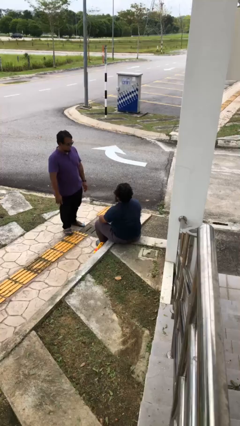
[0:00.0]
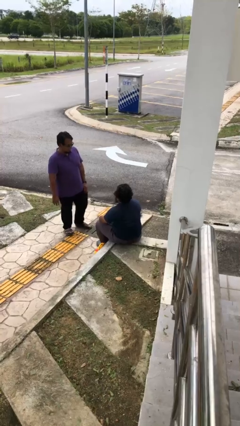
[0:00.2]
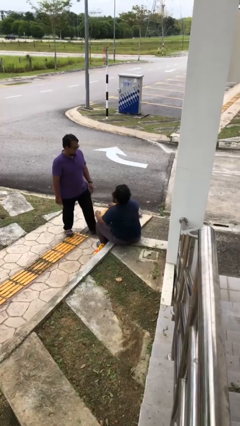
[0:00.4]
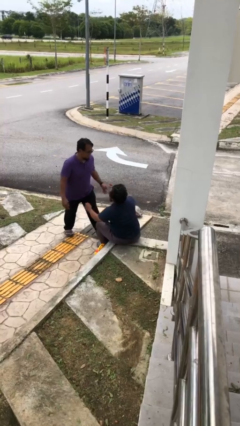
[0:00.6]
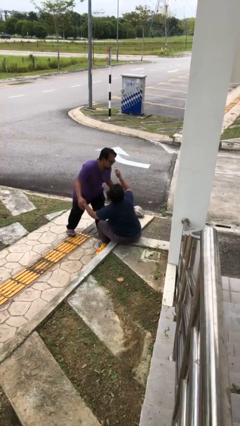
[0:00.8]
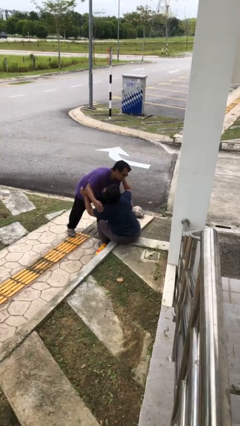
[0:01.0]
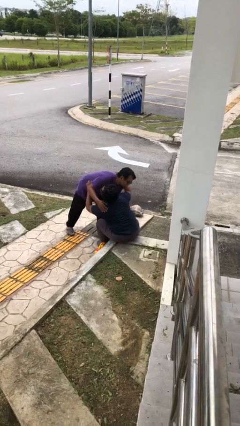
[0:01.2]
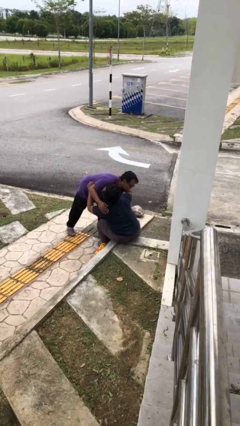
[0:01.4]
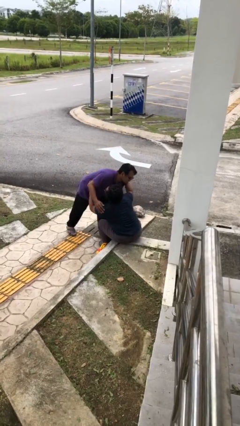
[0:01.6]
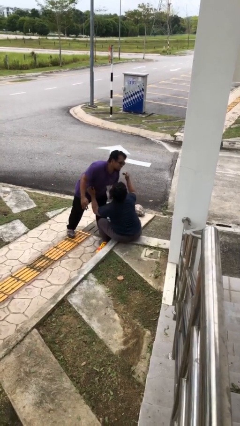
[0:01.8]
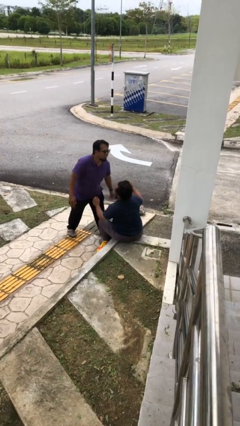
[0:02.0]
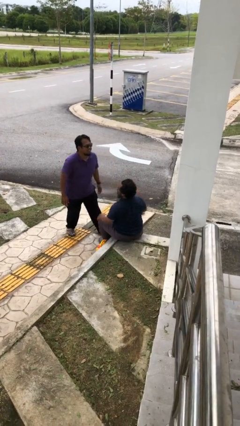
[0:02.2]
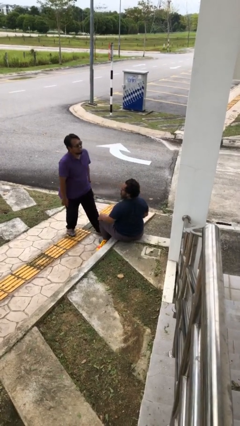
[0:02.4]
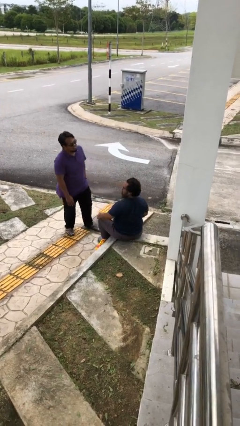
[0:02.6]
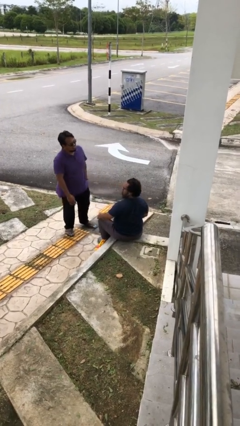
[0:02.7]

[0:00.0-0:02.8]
person embraces person

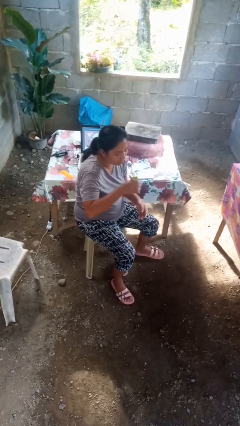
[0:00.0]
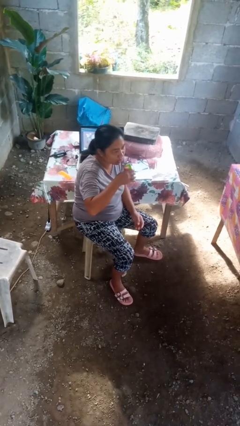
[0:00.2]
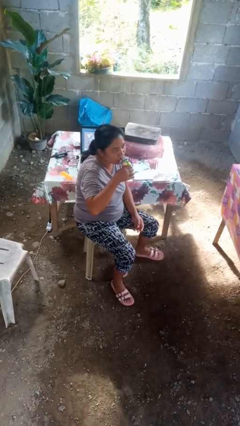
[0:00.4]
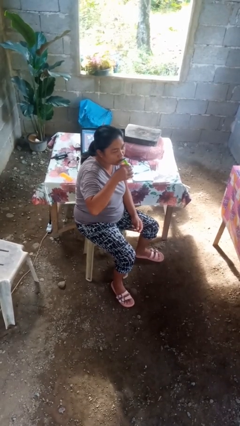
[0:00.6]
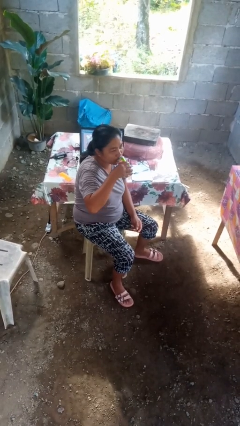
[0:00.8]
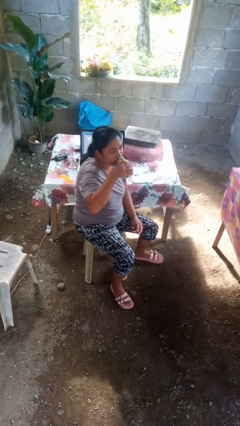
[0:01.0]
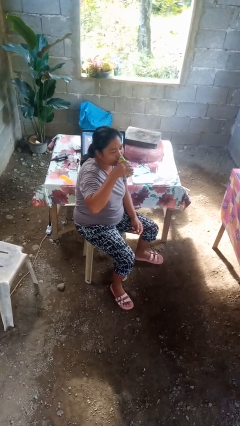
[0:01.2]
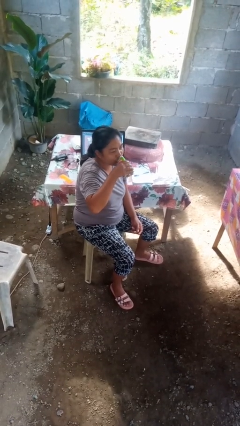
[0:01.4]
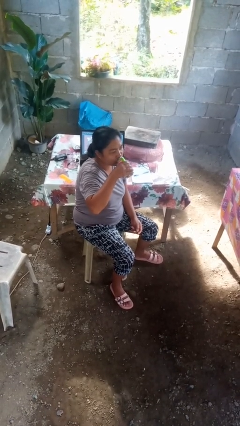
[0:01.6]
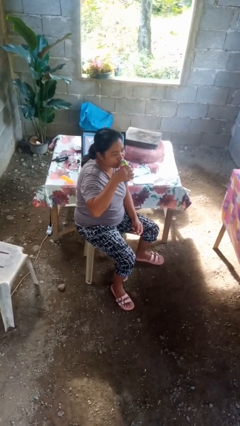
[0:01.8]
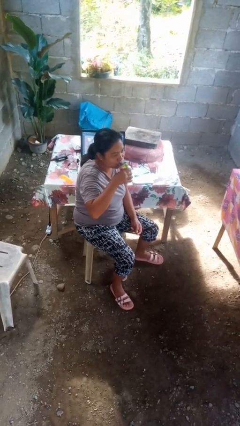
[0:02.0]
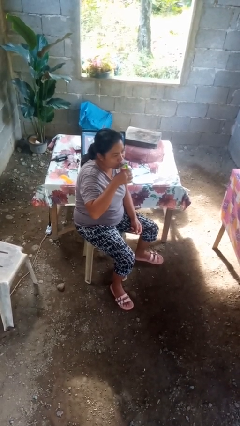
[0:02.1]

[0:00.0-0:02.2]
person drinks from beverage can

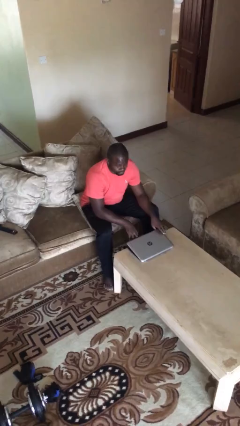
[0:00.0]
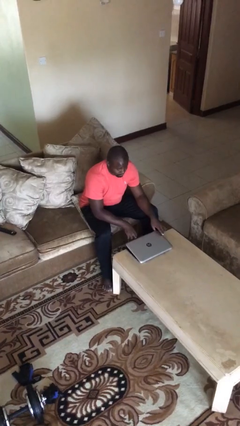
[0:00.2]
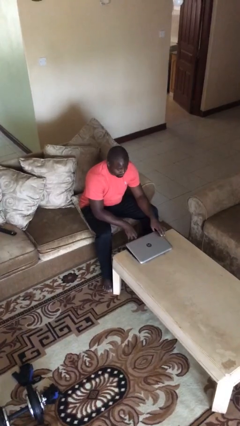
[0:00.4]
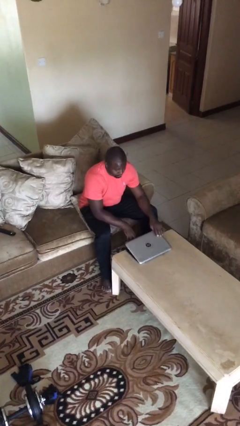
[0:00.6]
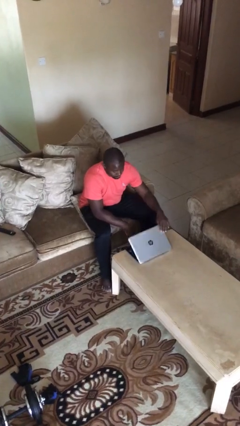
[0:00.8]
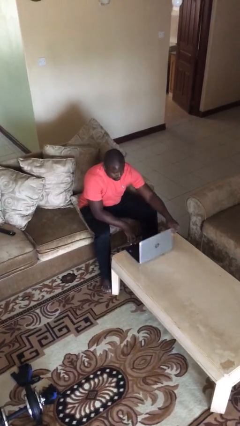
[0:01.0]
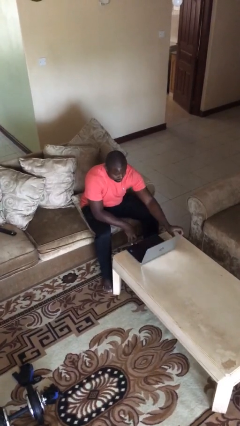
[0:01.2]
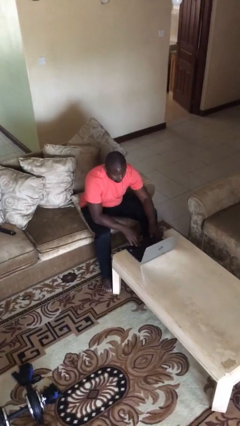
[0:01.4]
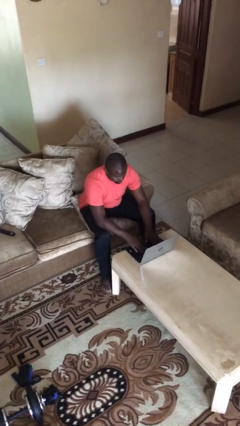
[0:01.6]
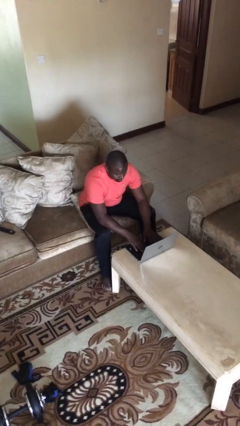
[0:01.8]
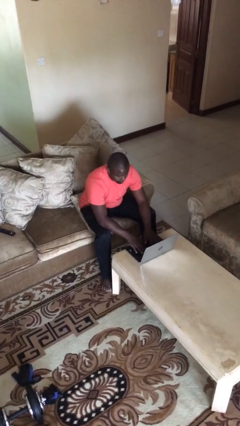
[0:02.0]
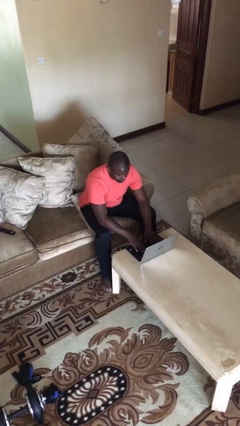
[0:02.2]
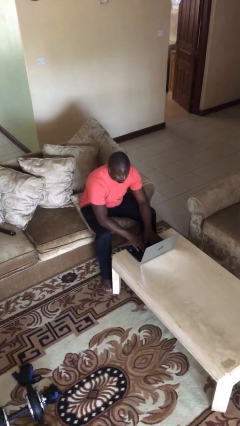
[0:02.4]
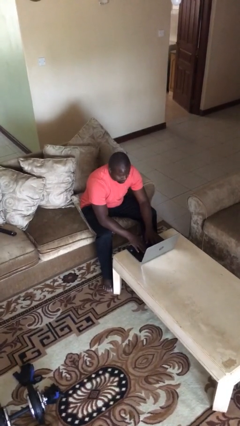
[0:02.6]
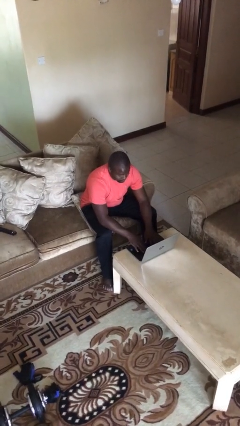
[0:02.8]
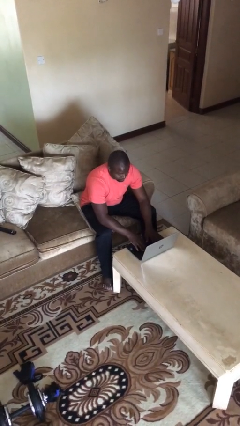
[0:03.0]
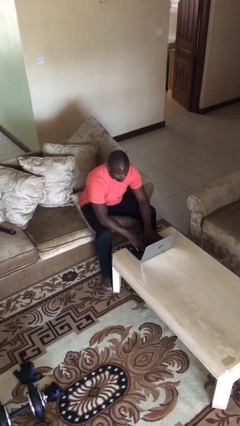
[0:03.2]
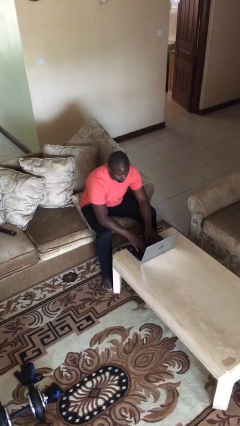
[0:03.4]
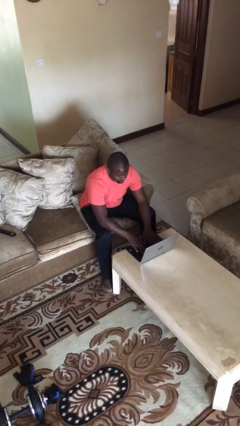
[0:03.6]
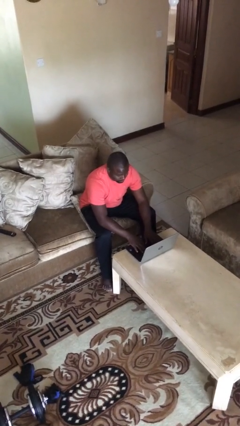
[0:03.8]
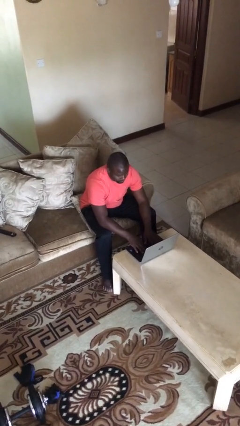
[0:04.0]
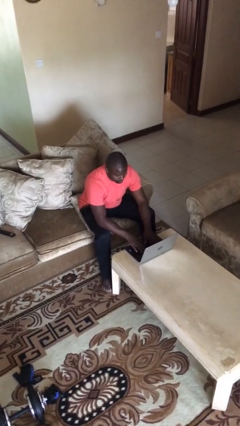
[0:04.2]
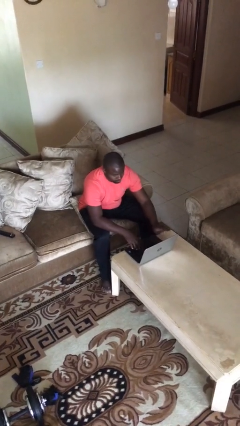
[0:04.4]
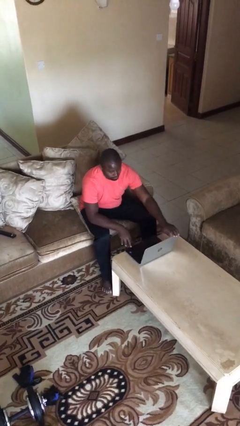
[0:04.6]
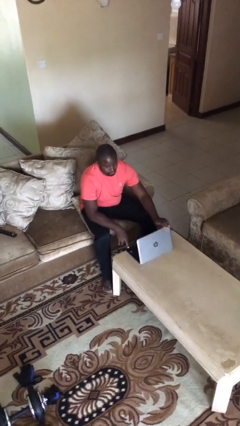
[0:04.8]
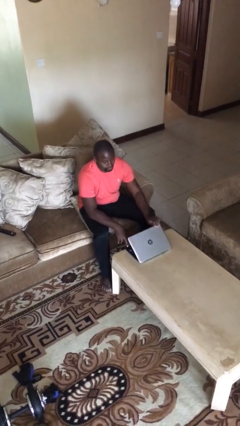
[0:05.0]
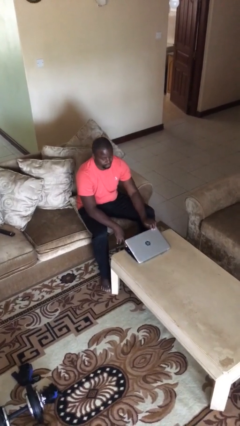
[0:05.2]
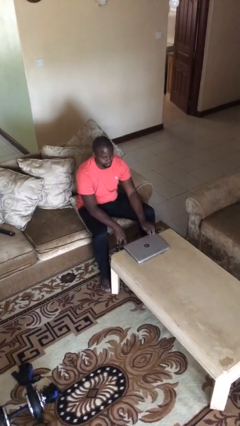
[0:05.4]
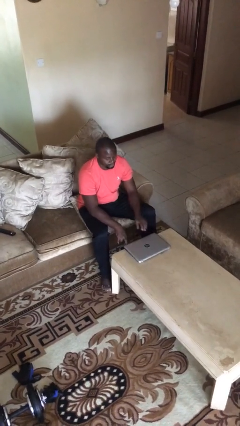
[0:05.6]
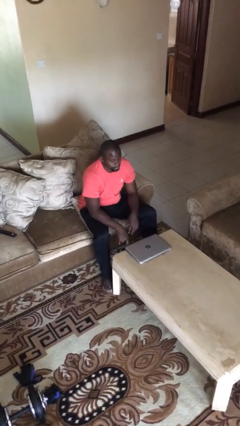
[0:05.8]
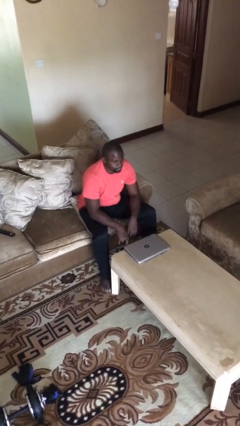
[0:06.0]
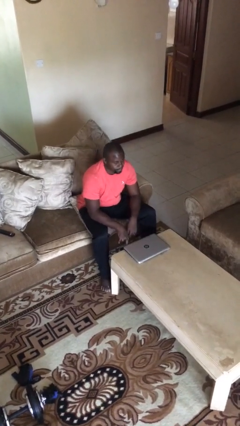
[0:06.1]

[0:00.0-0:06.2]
person interacts with laptop

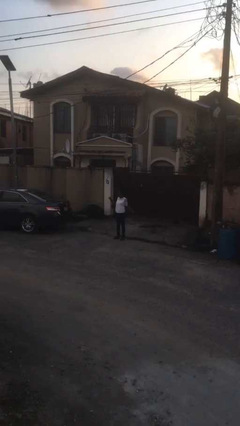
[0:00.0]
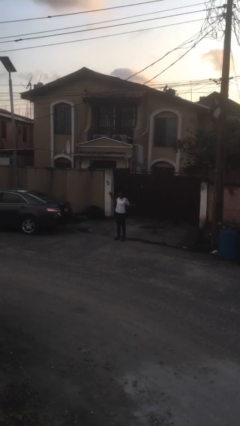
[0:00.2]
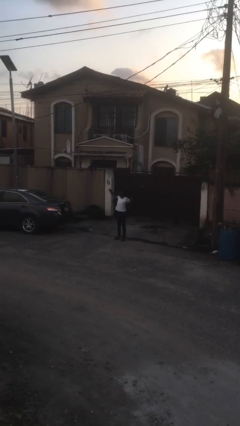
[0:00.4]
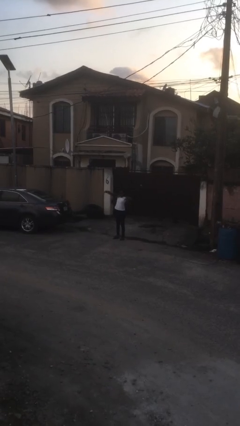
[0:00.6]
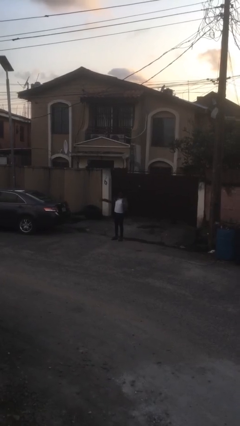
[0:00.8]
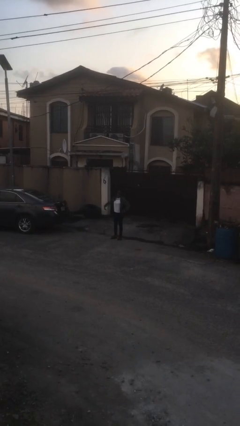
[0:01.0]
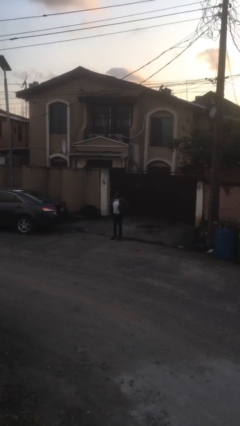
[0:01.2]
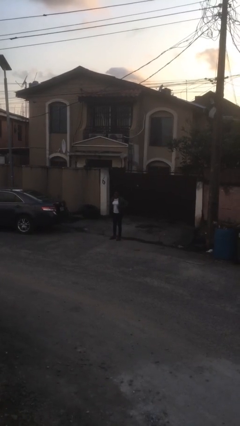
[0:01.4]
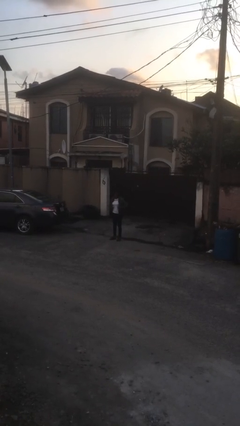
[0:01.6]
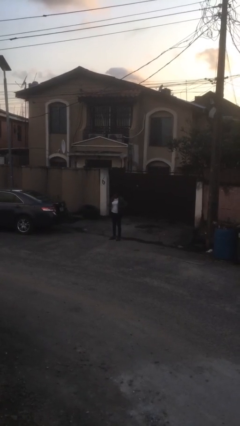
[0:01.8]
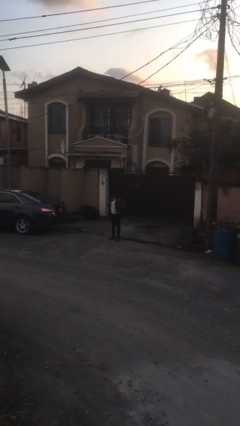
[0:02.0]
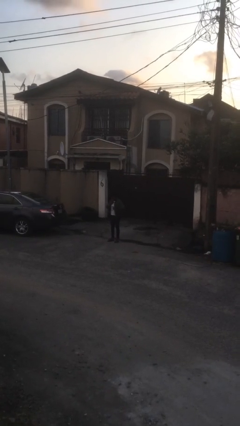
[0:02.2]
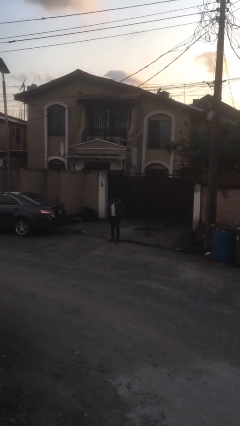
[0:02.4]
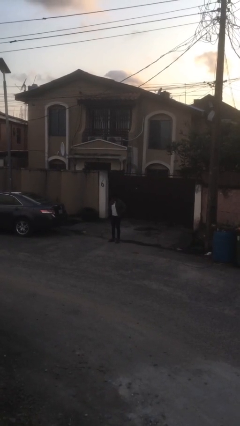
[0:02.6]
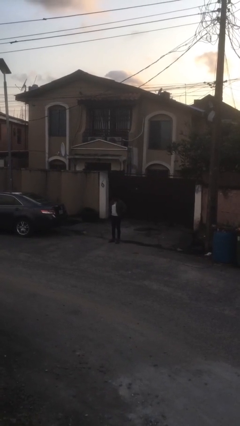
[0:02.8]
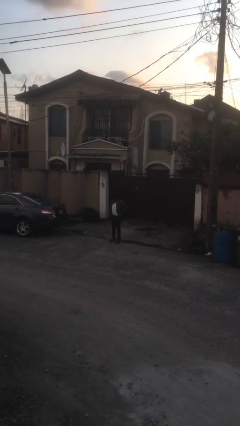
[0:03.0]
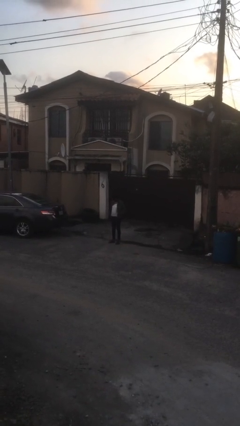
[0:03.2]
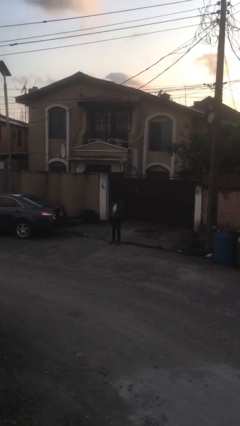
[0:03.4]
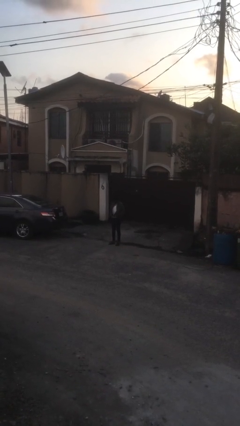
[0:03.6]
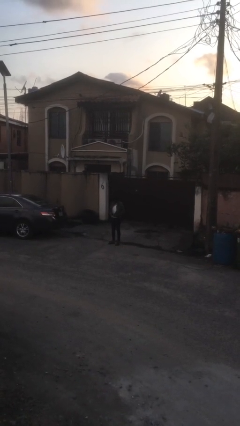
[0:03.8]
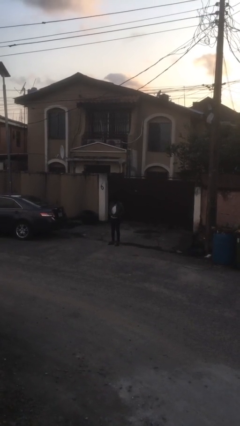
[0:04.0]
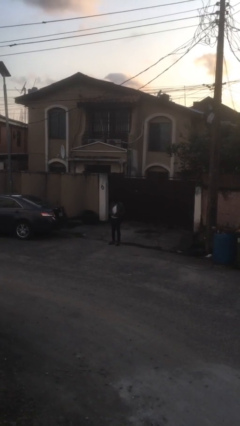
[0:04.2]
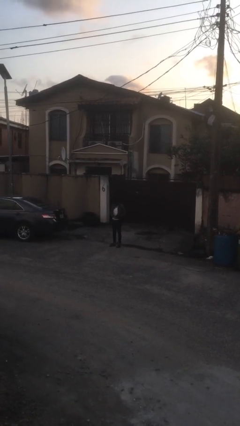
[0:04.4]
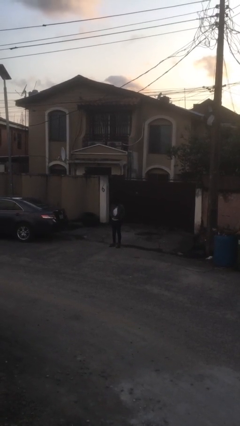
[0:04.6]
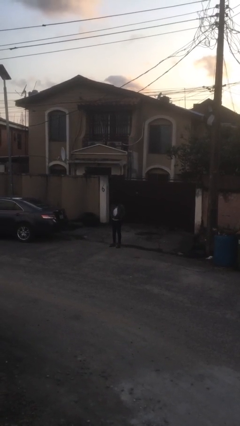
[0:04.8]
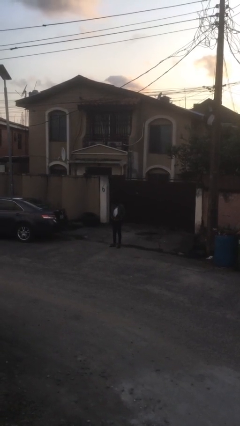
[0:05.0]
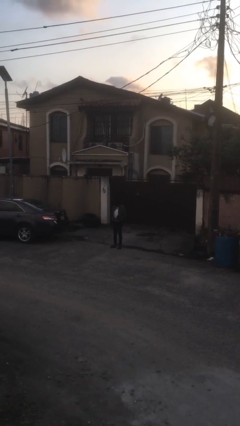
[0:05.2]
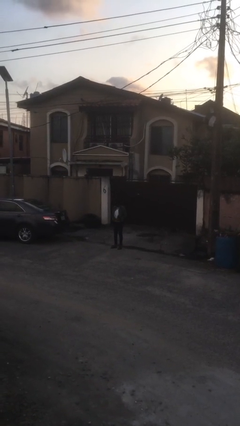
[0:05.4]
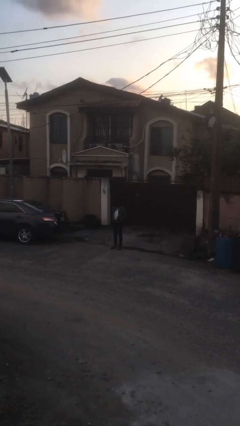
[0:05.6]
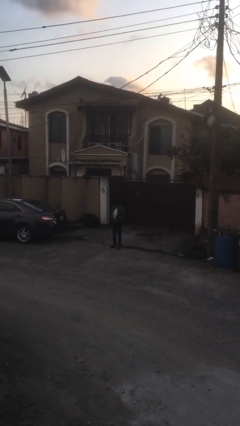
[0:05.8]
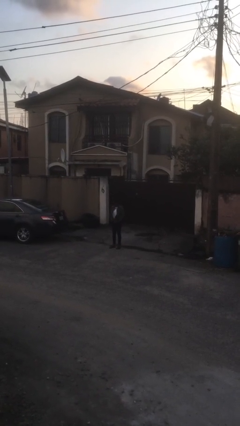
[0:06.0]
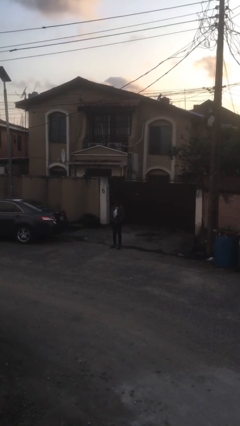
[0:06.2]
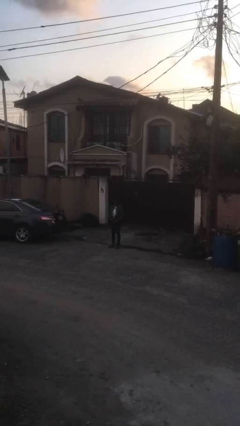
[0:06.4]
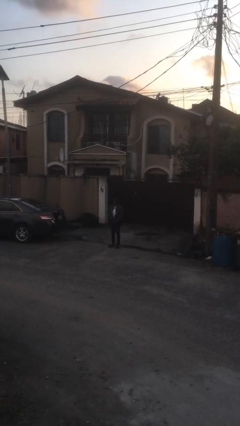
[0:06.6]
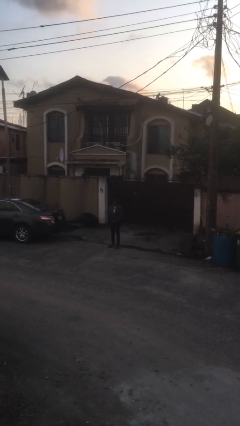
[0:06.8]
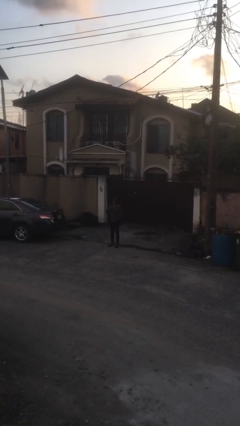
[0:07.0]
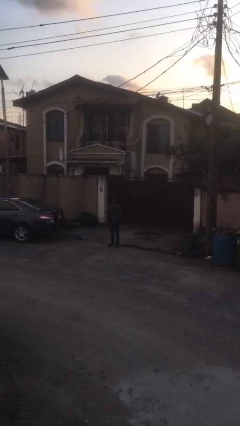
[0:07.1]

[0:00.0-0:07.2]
person puts on jacket
